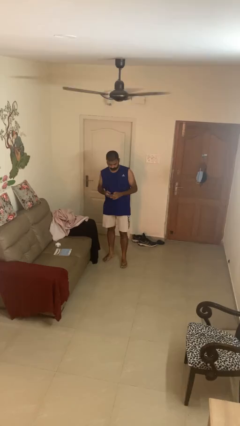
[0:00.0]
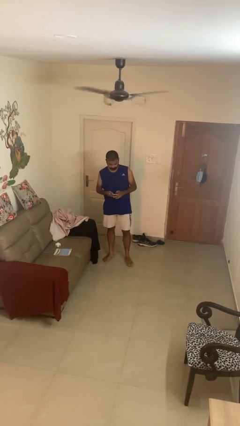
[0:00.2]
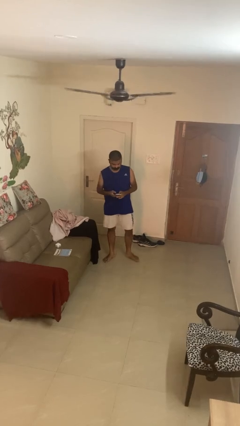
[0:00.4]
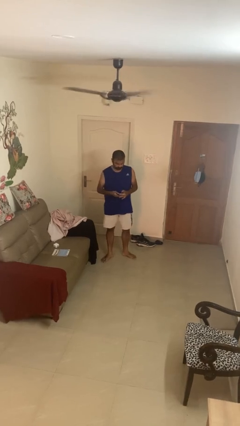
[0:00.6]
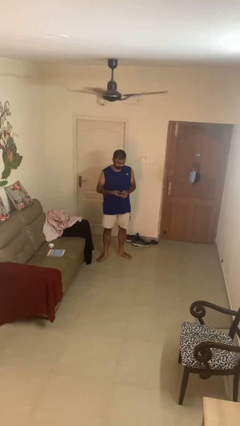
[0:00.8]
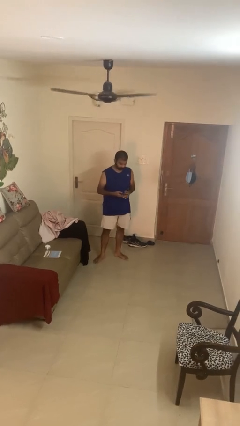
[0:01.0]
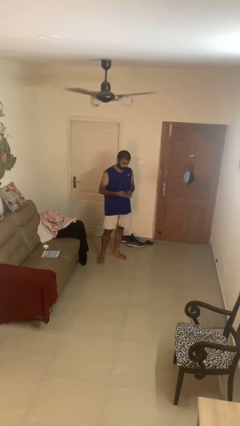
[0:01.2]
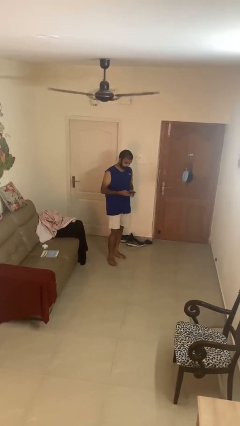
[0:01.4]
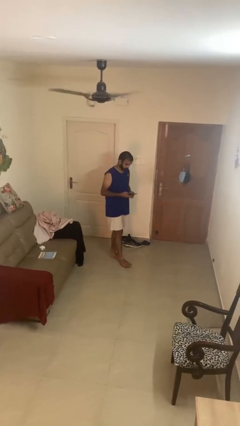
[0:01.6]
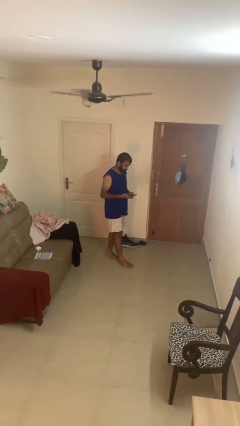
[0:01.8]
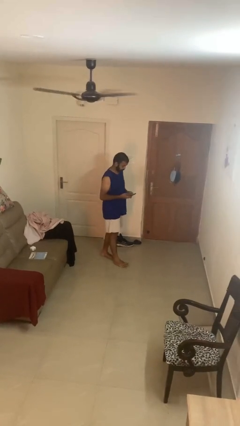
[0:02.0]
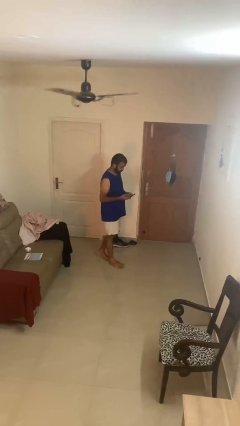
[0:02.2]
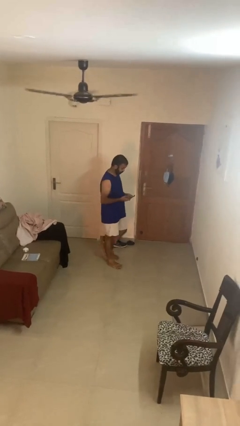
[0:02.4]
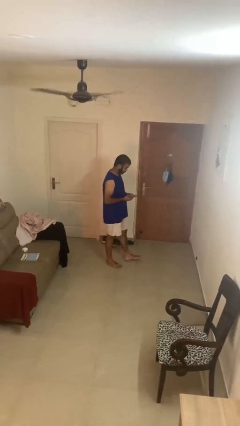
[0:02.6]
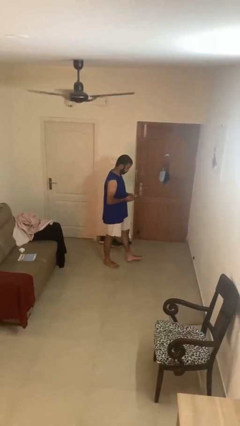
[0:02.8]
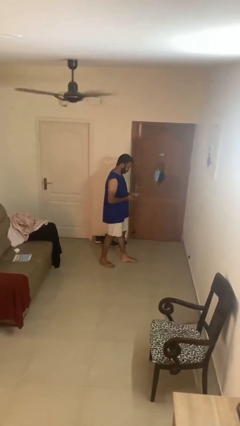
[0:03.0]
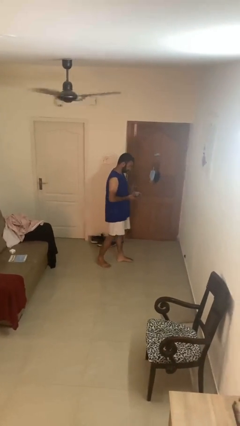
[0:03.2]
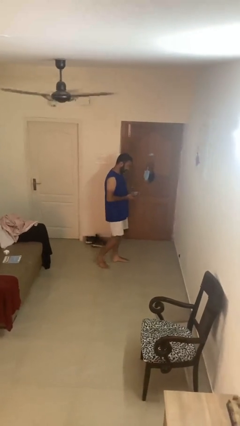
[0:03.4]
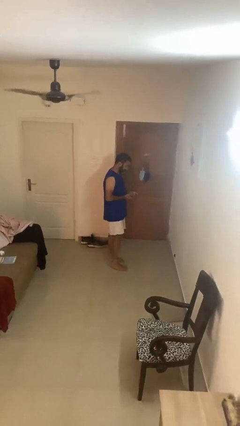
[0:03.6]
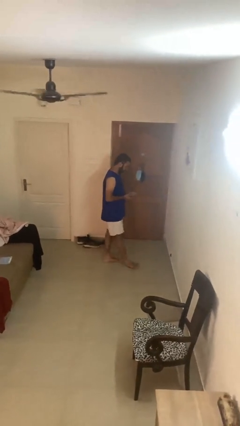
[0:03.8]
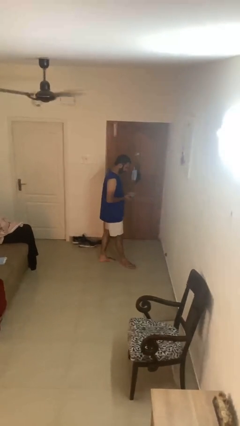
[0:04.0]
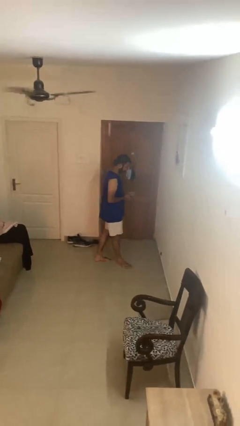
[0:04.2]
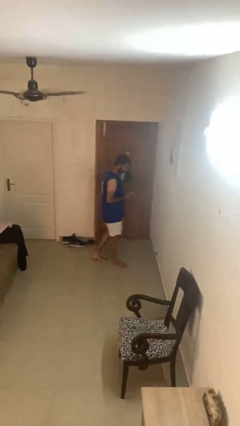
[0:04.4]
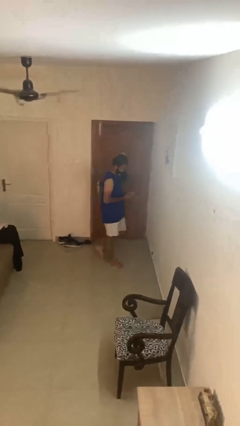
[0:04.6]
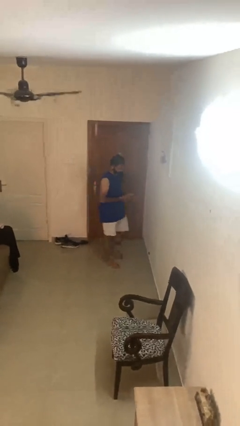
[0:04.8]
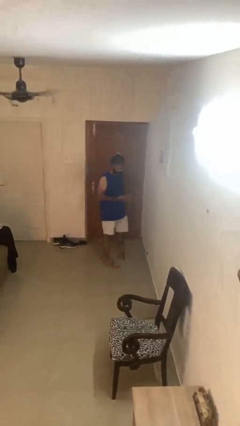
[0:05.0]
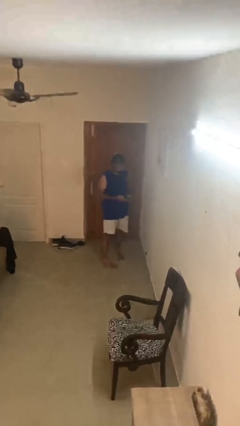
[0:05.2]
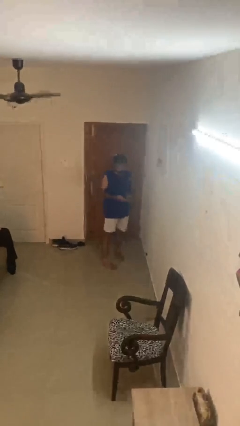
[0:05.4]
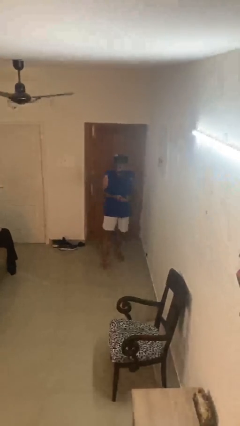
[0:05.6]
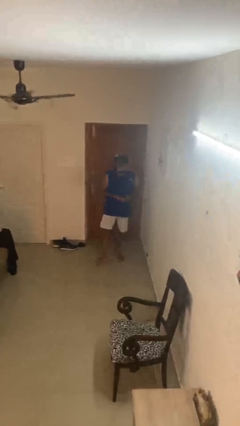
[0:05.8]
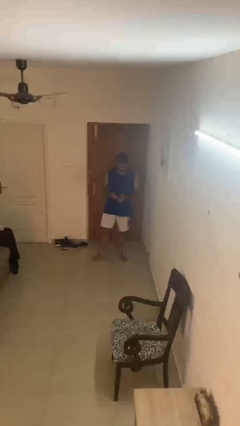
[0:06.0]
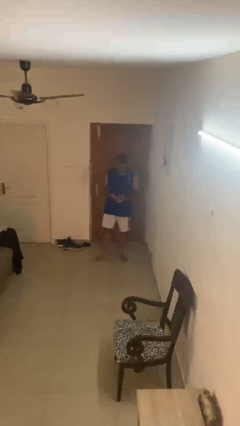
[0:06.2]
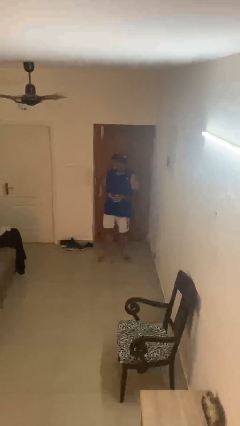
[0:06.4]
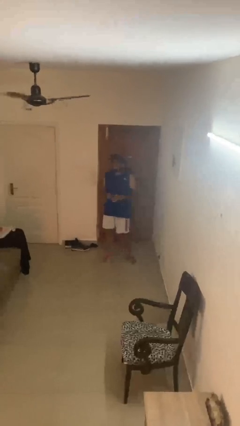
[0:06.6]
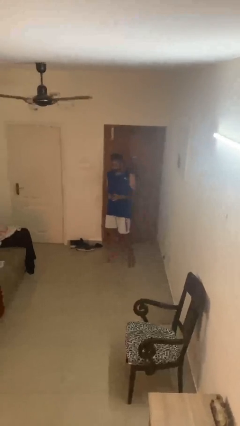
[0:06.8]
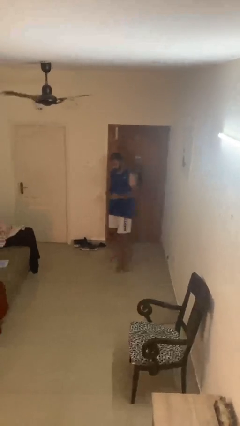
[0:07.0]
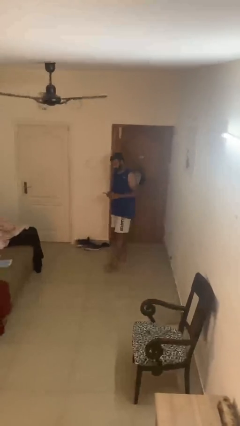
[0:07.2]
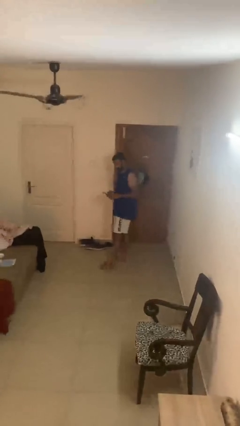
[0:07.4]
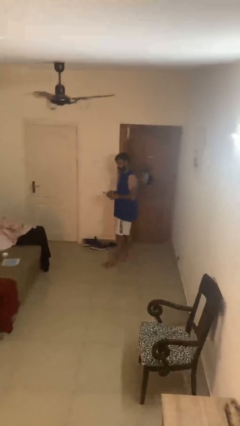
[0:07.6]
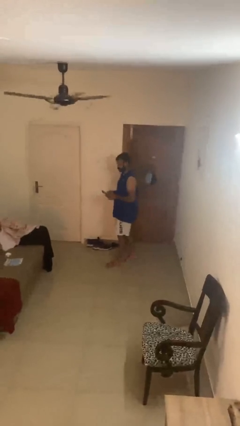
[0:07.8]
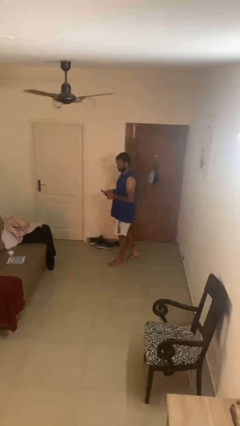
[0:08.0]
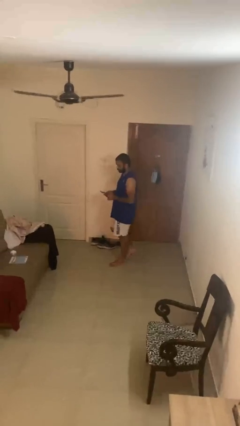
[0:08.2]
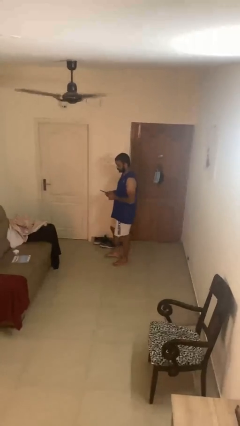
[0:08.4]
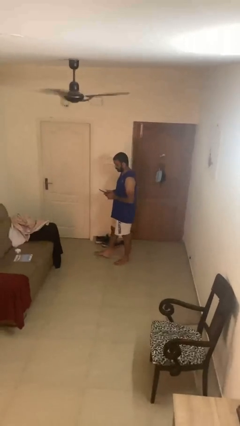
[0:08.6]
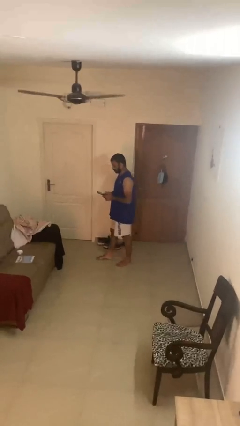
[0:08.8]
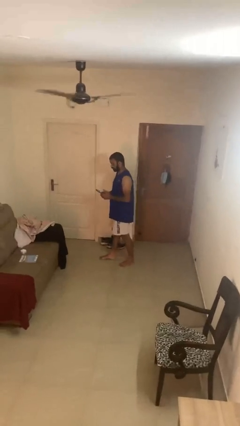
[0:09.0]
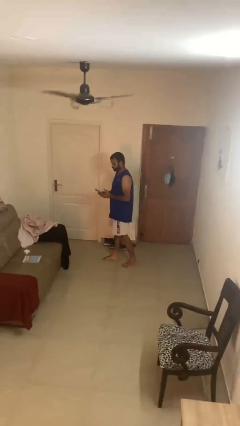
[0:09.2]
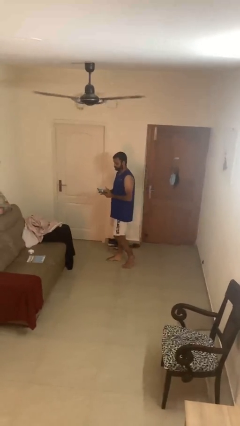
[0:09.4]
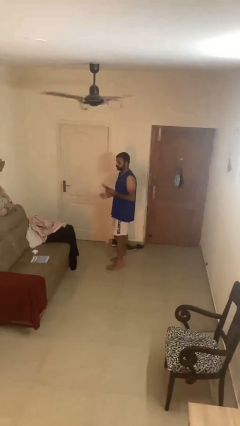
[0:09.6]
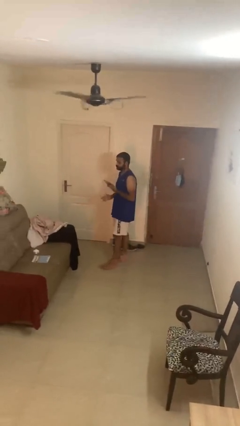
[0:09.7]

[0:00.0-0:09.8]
person texts on phone

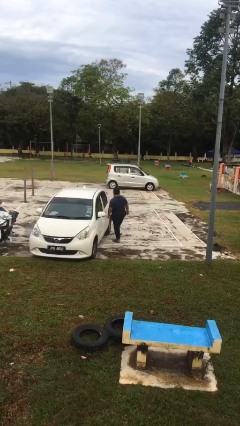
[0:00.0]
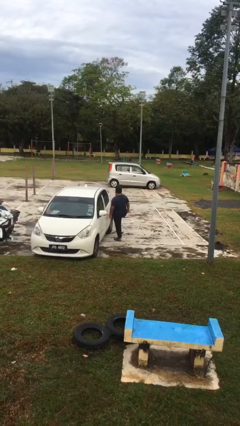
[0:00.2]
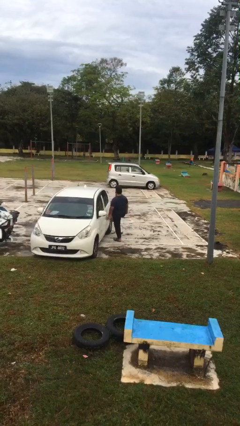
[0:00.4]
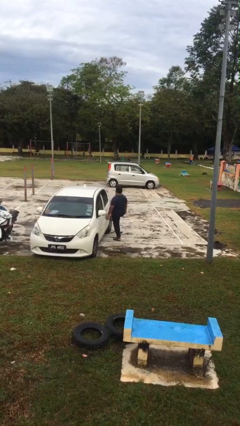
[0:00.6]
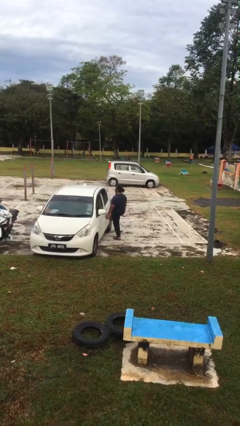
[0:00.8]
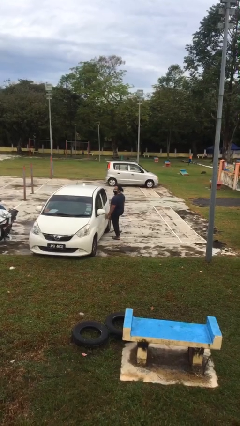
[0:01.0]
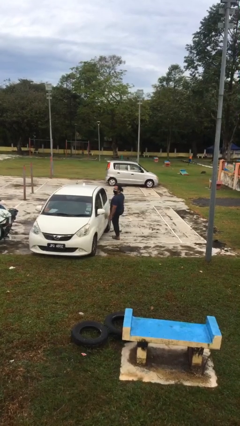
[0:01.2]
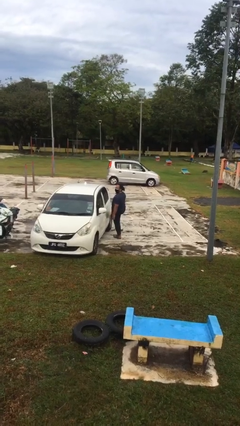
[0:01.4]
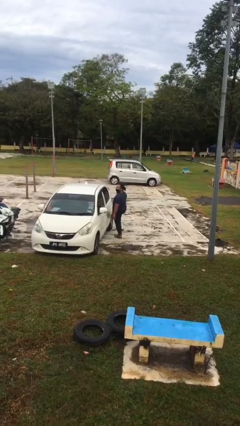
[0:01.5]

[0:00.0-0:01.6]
person kicks car tires

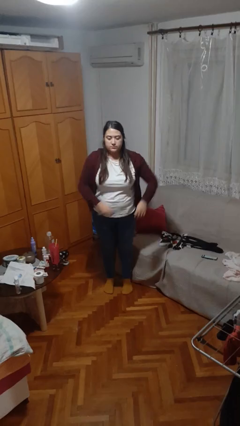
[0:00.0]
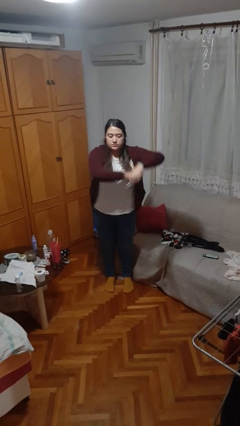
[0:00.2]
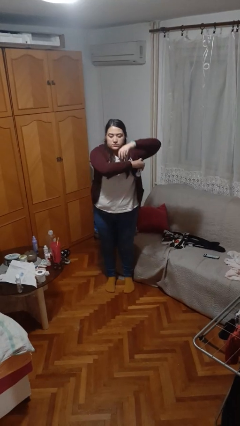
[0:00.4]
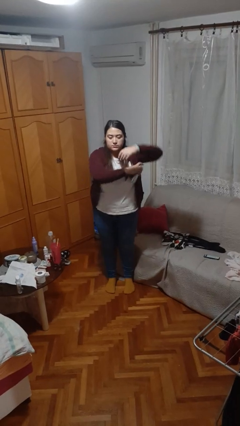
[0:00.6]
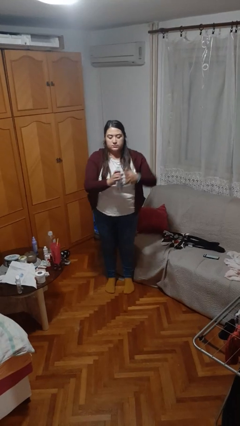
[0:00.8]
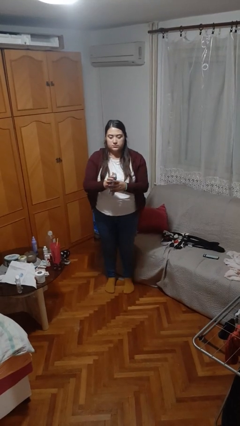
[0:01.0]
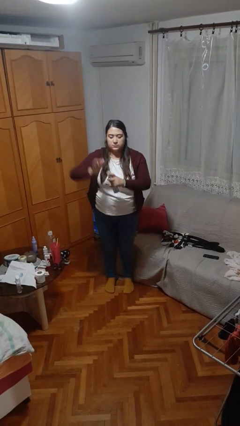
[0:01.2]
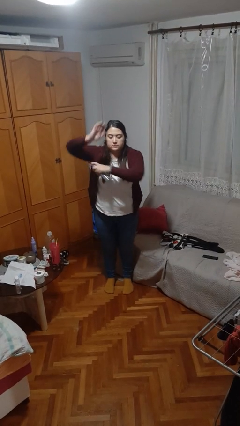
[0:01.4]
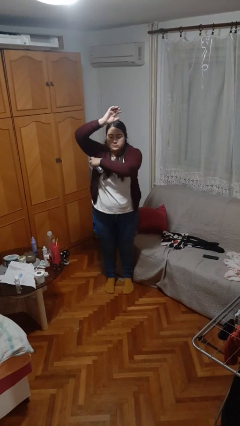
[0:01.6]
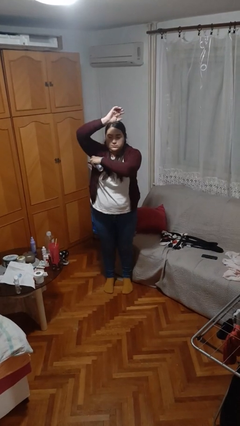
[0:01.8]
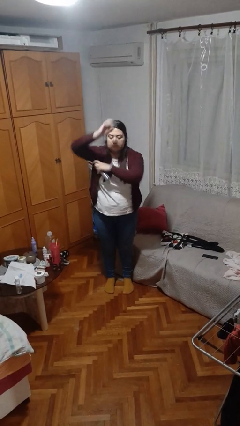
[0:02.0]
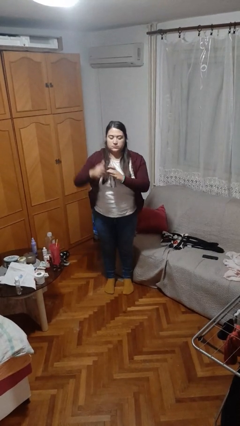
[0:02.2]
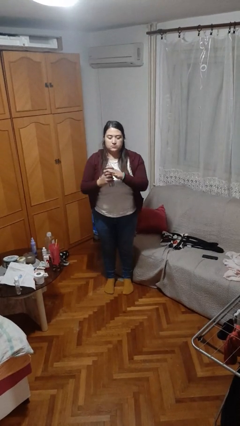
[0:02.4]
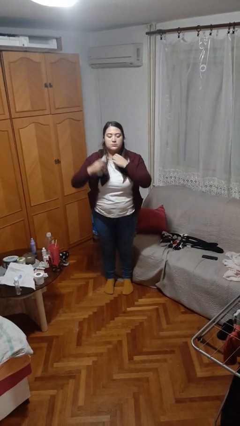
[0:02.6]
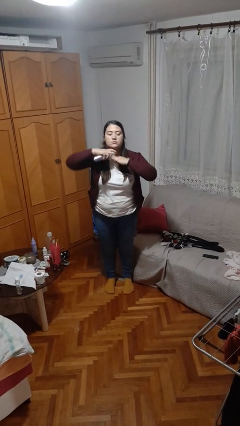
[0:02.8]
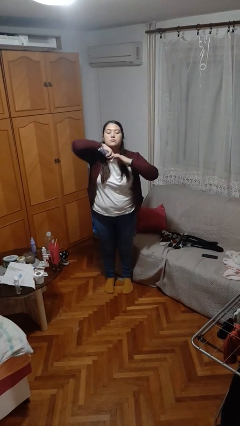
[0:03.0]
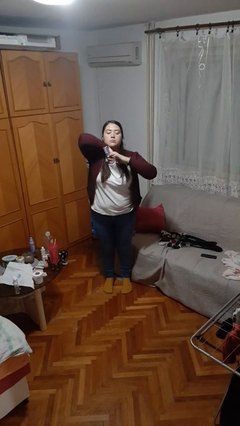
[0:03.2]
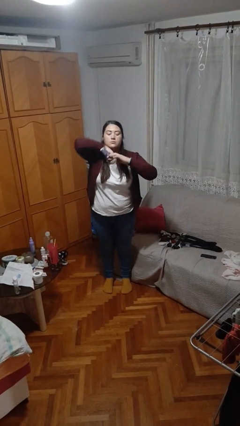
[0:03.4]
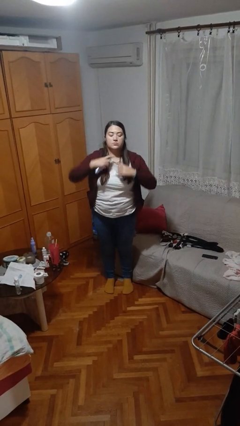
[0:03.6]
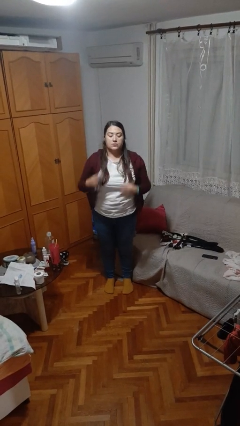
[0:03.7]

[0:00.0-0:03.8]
person applies deodorant

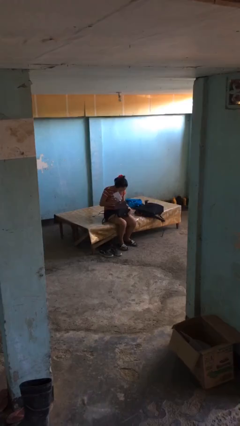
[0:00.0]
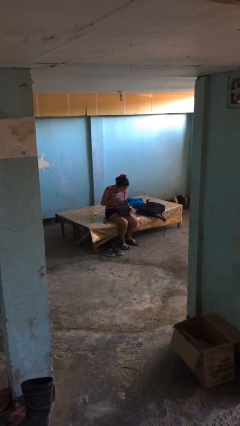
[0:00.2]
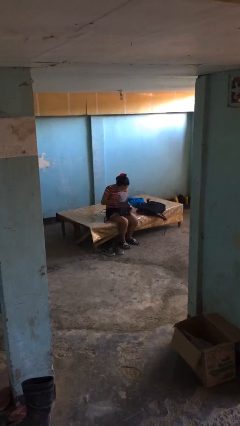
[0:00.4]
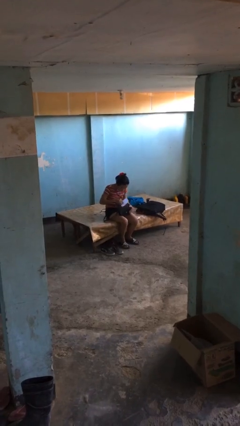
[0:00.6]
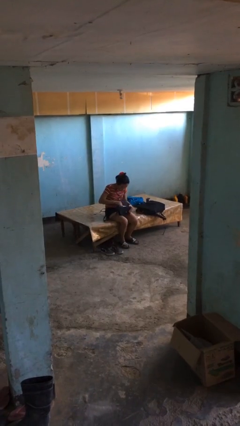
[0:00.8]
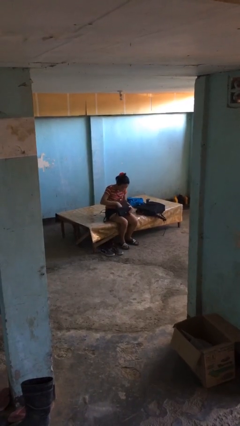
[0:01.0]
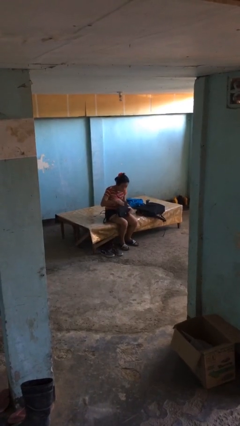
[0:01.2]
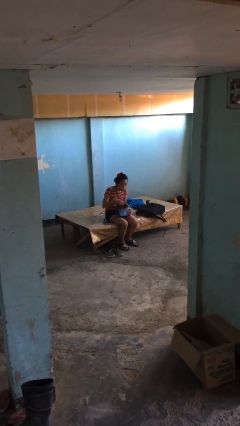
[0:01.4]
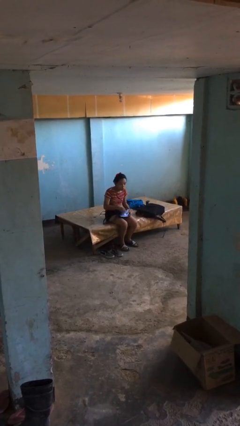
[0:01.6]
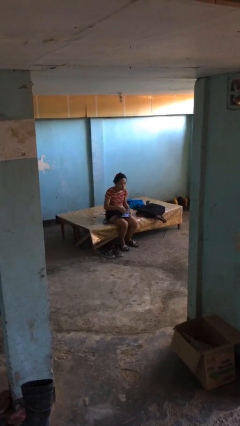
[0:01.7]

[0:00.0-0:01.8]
person puts object into purse

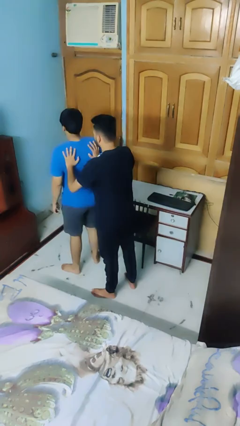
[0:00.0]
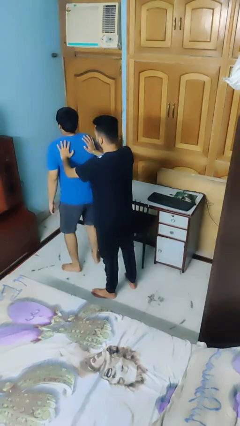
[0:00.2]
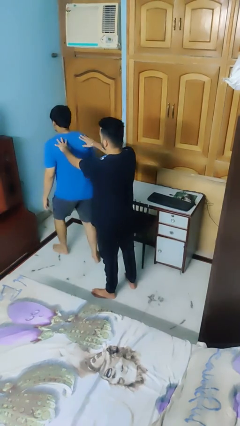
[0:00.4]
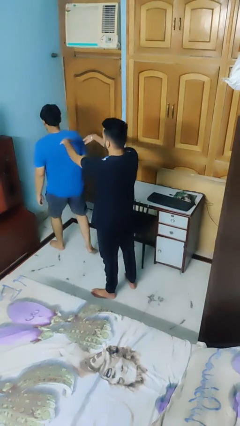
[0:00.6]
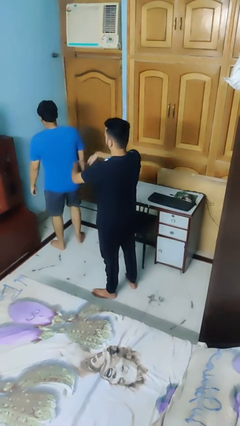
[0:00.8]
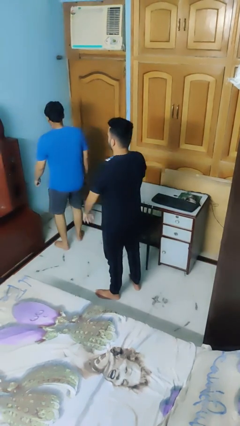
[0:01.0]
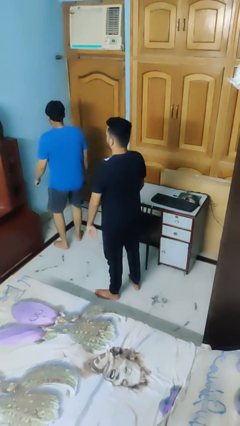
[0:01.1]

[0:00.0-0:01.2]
person shoves person
